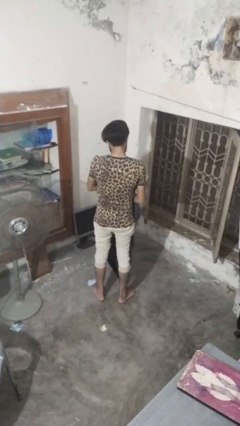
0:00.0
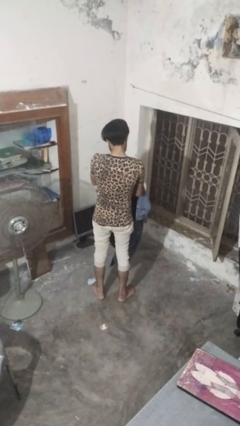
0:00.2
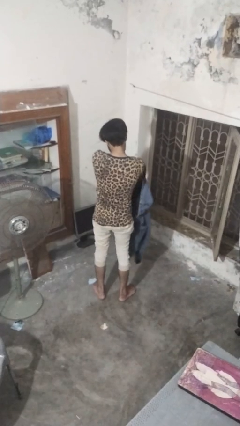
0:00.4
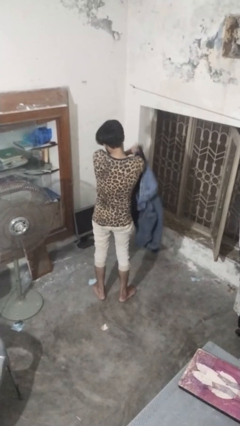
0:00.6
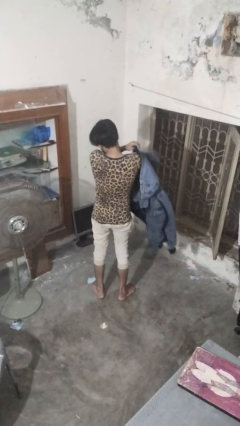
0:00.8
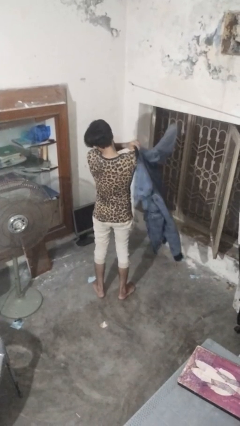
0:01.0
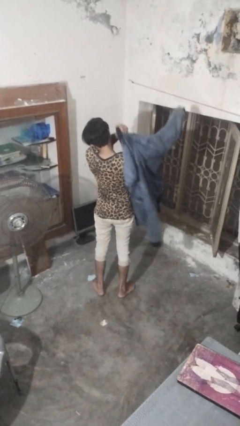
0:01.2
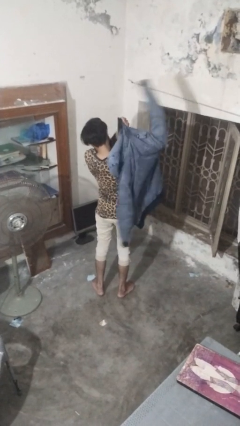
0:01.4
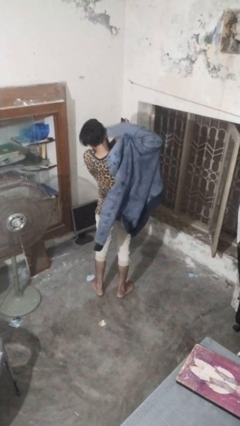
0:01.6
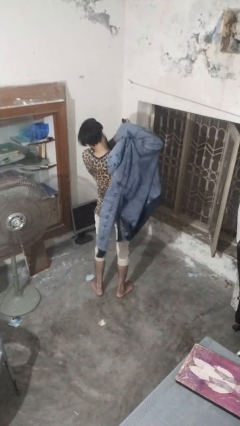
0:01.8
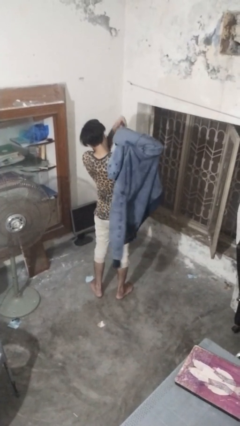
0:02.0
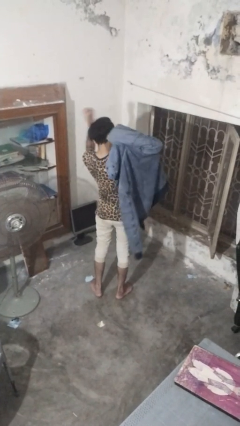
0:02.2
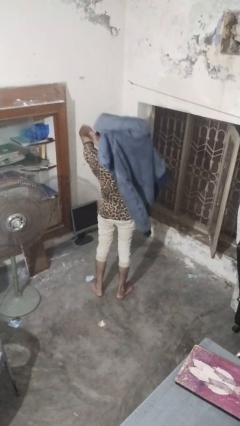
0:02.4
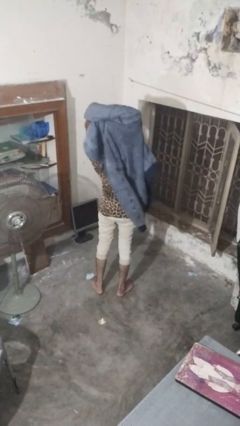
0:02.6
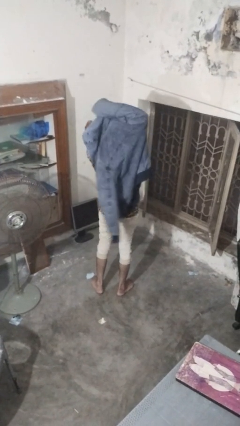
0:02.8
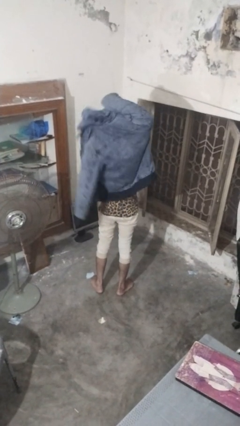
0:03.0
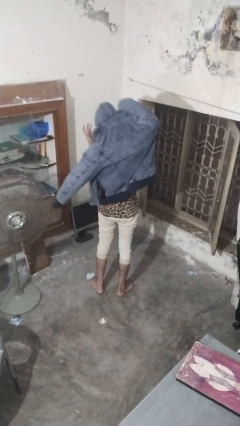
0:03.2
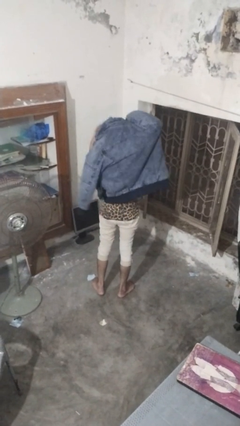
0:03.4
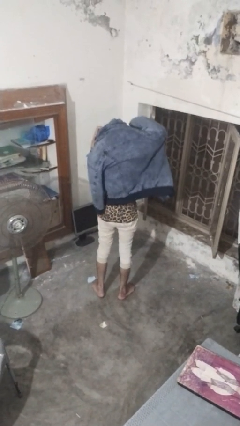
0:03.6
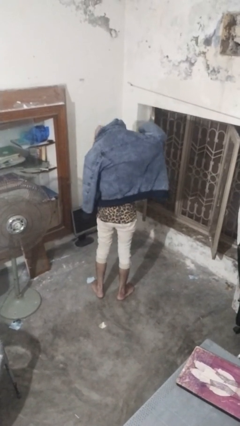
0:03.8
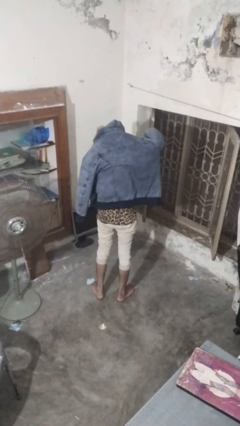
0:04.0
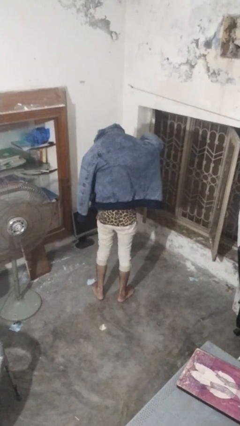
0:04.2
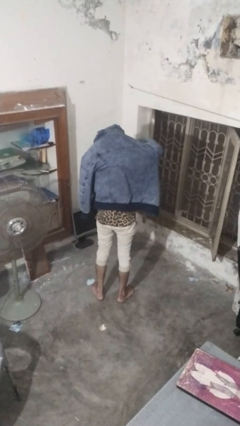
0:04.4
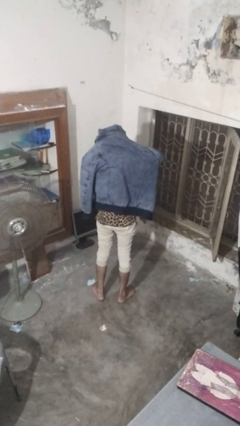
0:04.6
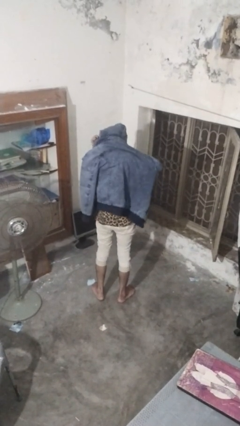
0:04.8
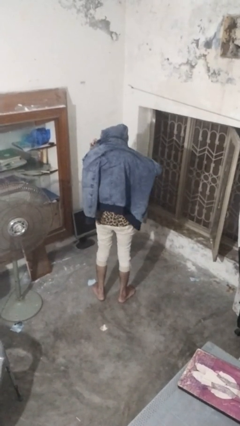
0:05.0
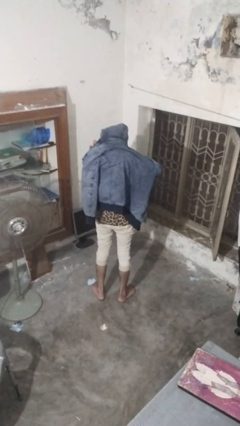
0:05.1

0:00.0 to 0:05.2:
person puts on hoodie

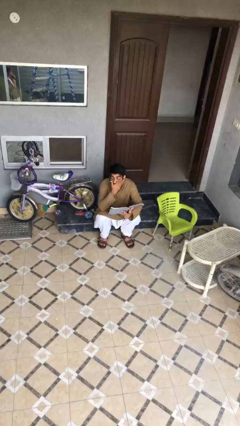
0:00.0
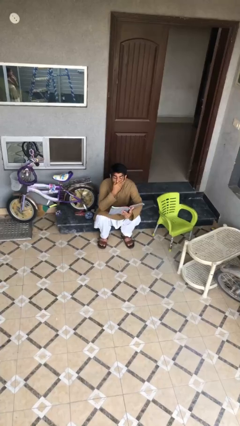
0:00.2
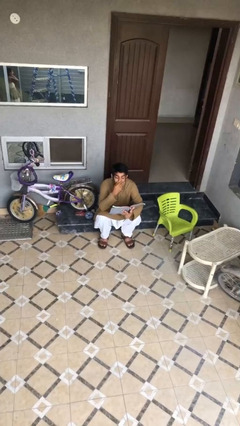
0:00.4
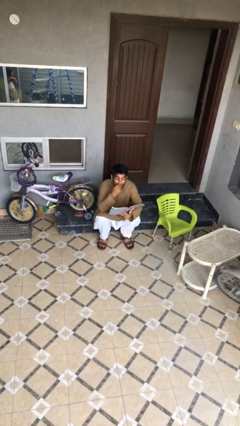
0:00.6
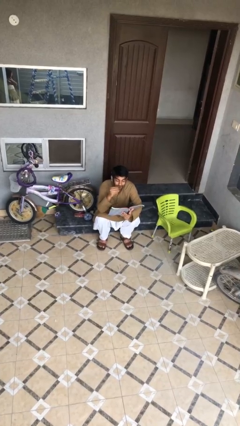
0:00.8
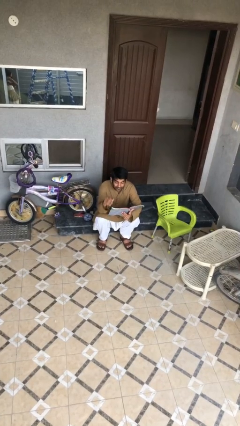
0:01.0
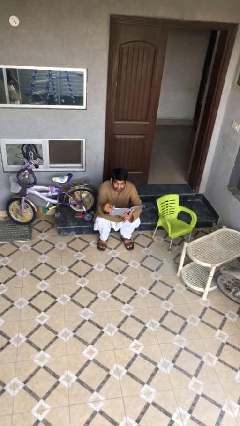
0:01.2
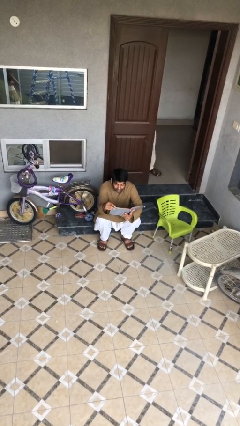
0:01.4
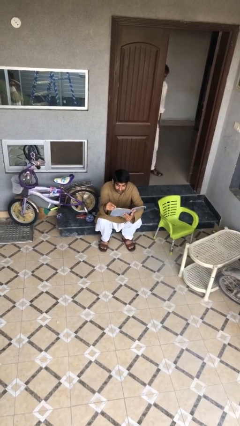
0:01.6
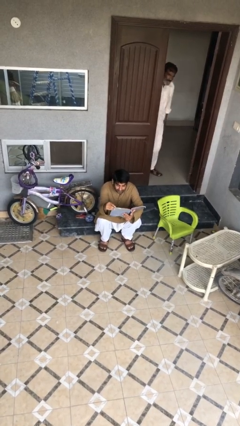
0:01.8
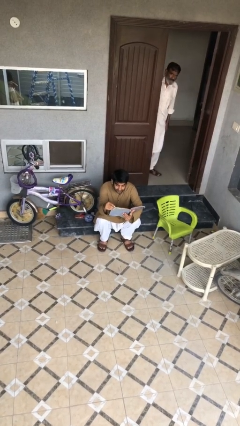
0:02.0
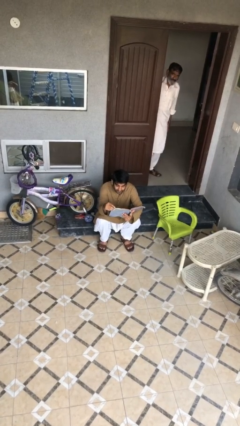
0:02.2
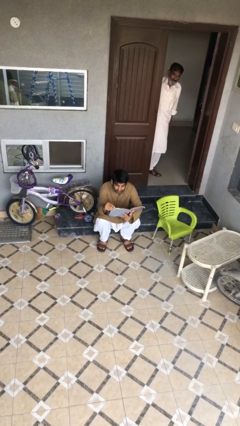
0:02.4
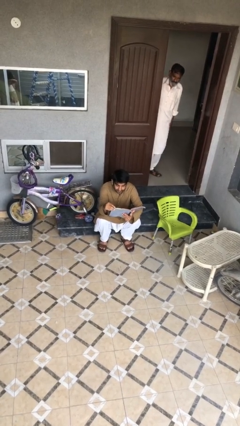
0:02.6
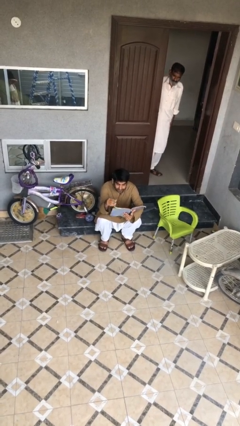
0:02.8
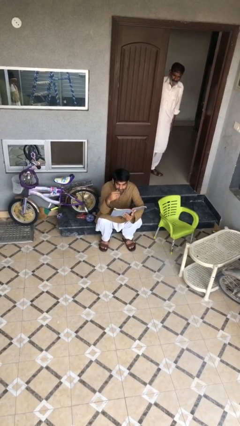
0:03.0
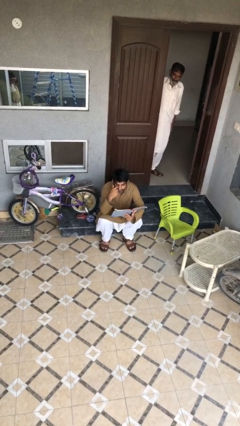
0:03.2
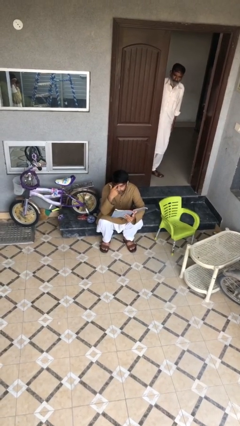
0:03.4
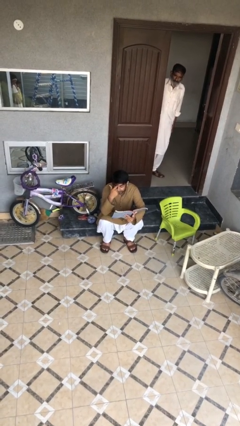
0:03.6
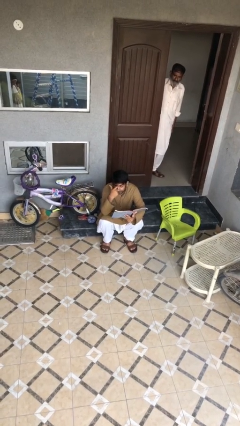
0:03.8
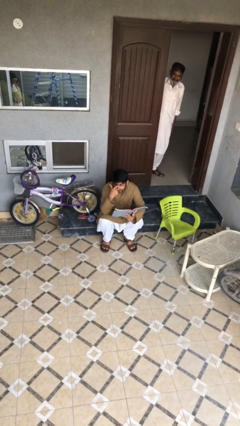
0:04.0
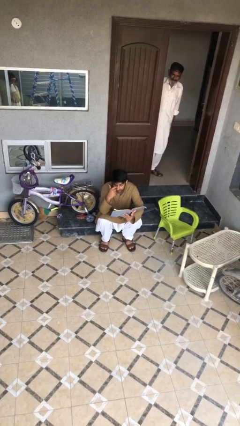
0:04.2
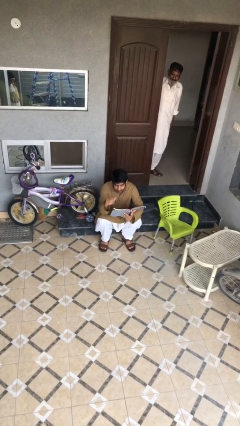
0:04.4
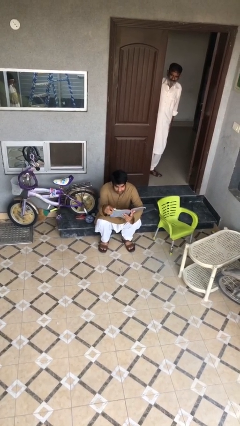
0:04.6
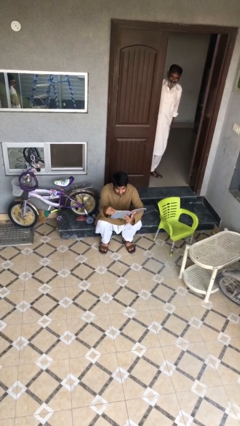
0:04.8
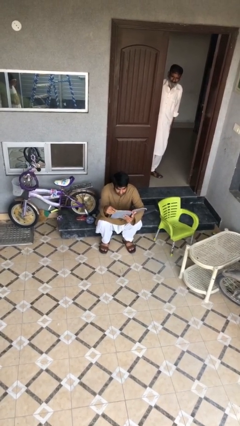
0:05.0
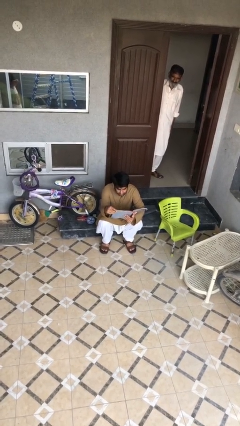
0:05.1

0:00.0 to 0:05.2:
person reads document

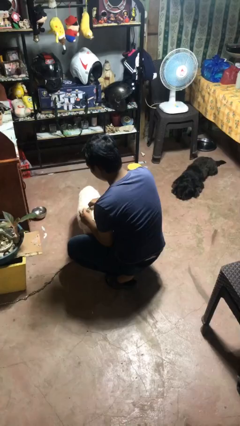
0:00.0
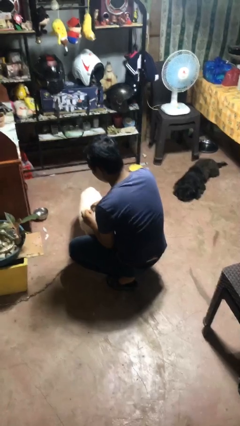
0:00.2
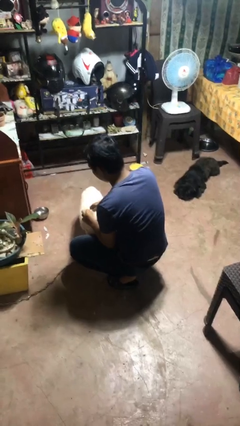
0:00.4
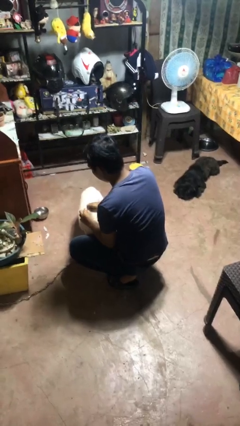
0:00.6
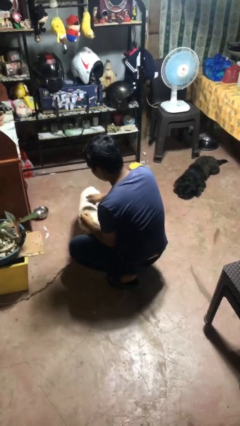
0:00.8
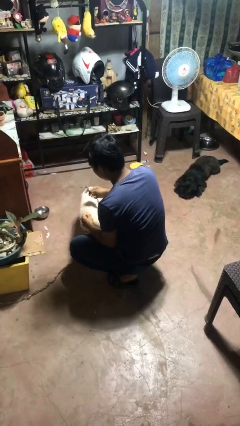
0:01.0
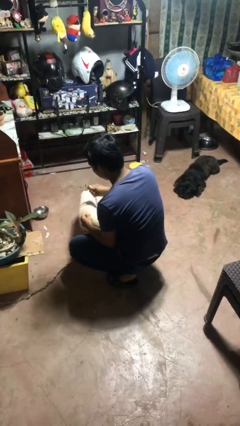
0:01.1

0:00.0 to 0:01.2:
person unattaches leash from dog

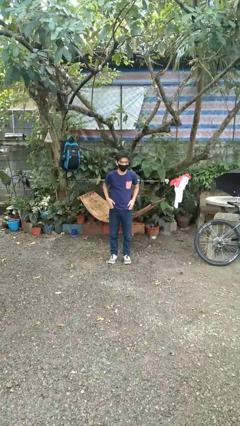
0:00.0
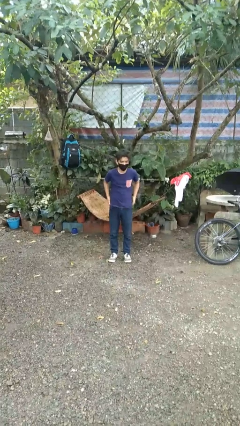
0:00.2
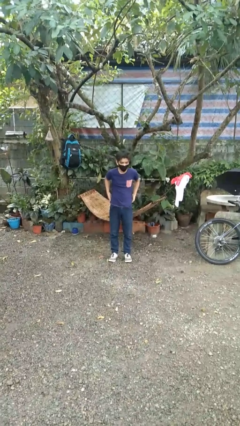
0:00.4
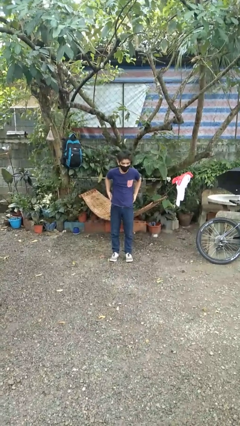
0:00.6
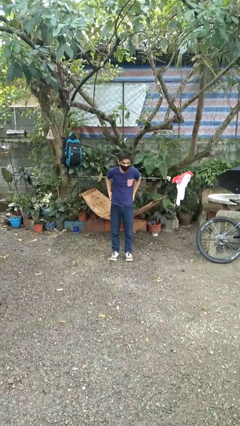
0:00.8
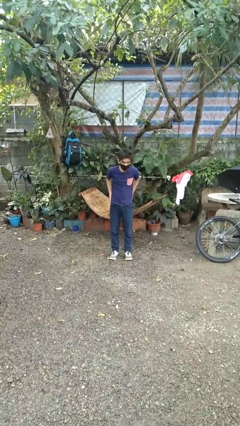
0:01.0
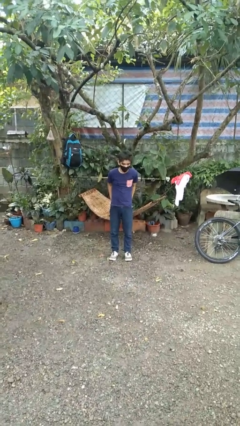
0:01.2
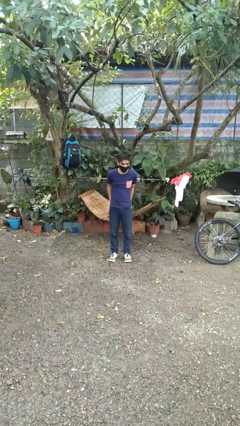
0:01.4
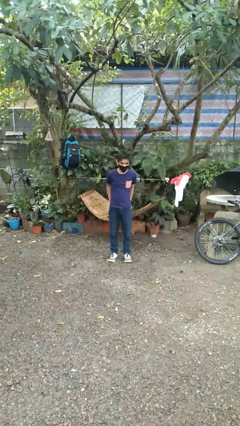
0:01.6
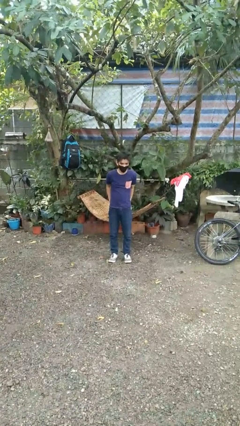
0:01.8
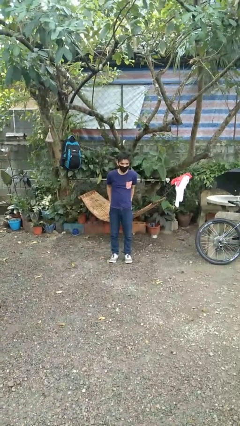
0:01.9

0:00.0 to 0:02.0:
person puts hands in back pockets

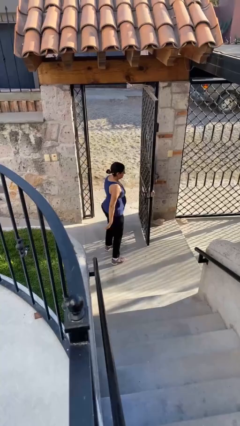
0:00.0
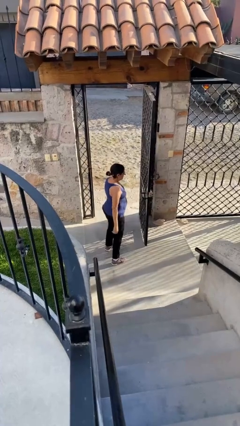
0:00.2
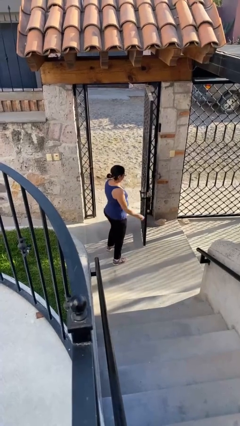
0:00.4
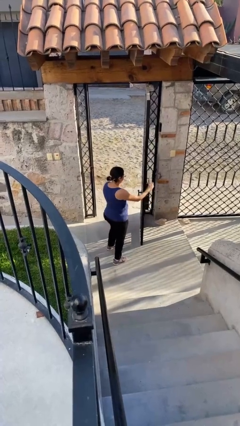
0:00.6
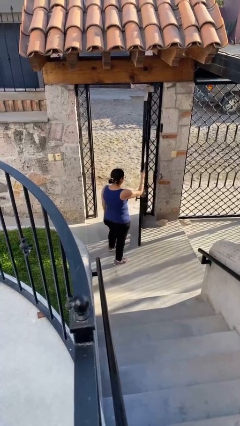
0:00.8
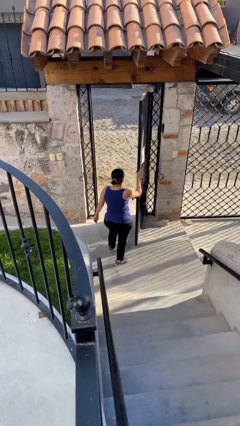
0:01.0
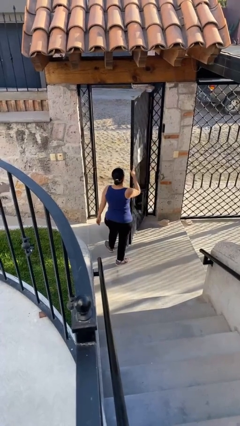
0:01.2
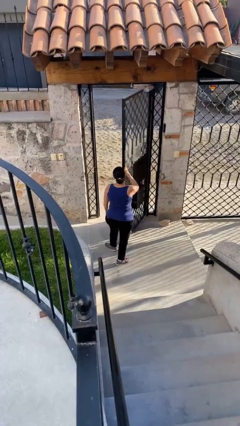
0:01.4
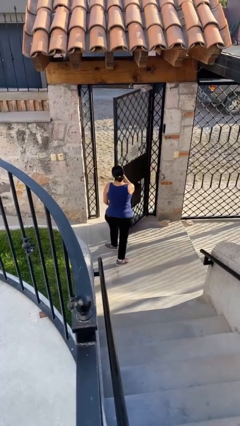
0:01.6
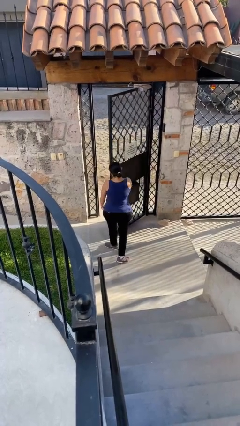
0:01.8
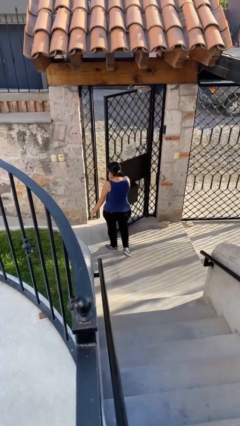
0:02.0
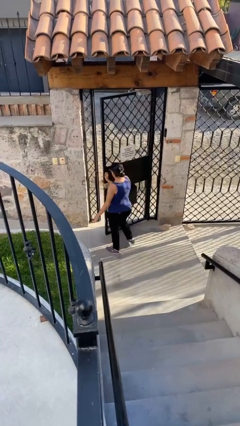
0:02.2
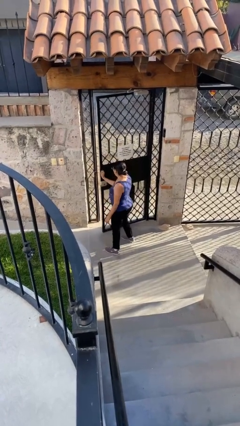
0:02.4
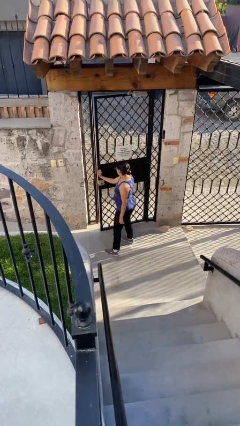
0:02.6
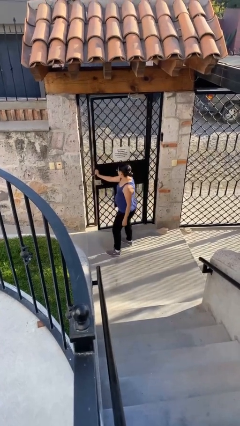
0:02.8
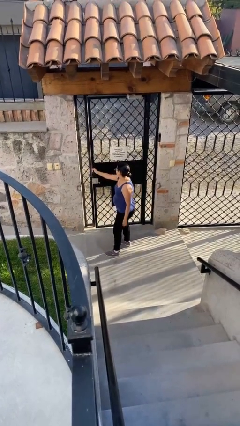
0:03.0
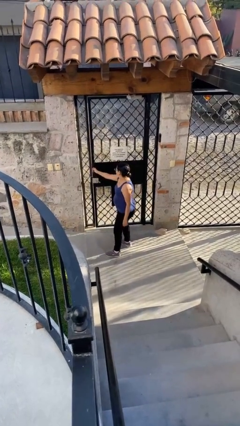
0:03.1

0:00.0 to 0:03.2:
person closes facility door

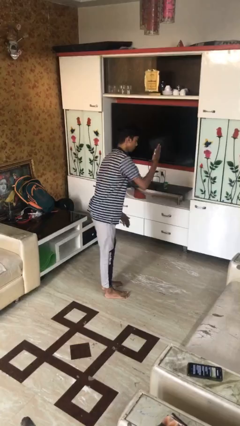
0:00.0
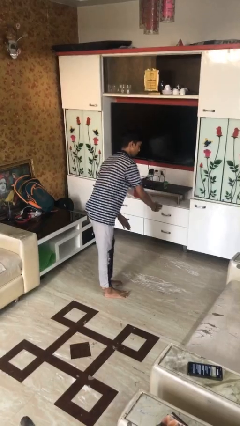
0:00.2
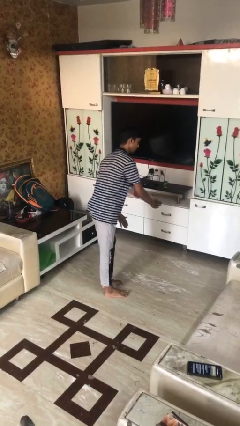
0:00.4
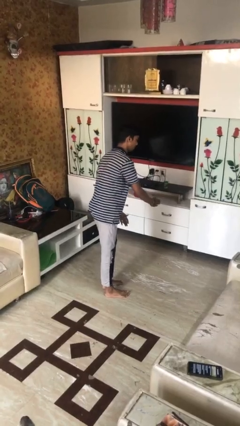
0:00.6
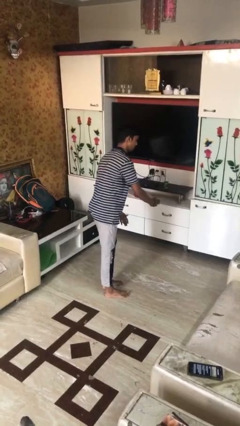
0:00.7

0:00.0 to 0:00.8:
person karate chop
